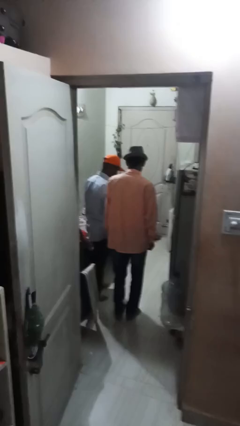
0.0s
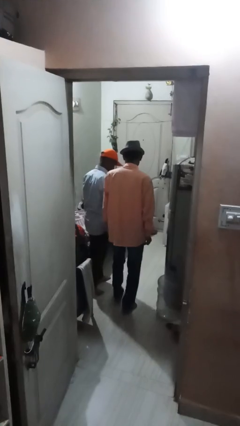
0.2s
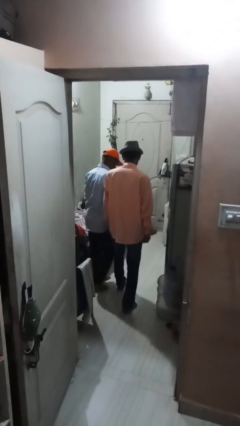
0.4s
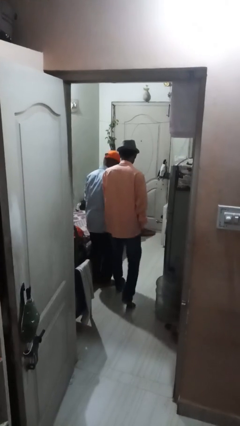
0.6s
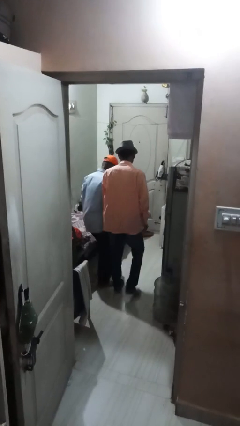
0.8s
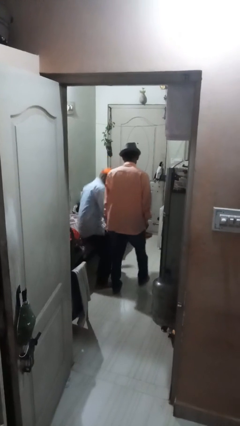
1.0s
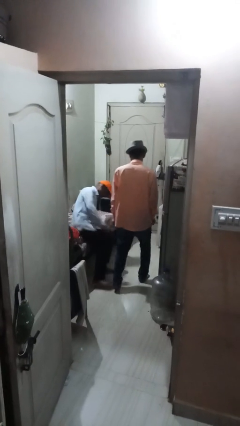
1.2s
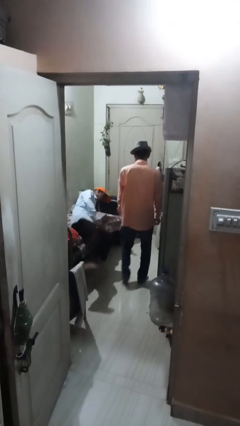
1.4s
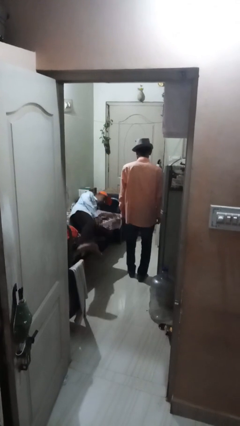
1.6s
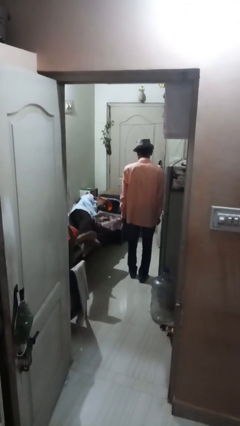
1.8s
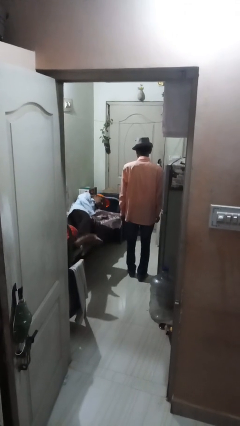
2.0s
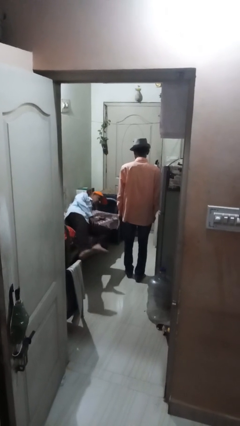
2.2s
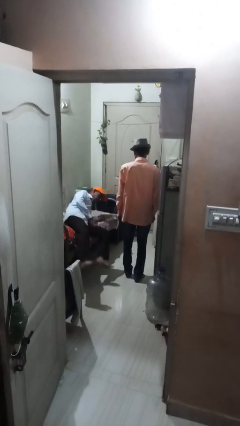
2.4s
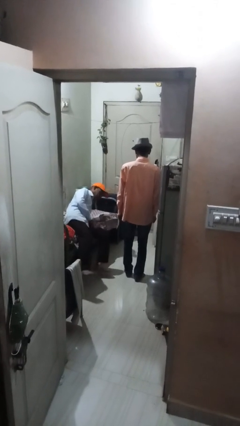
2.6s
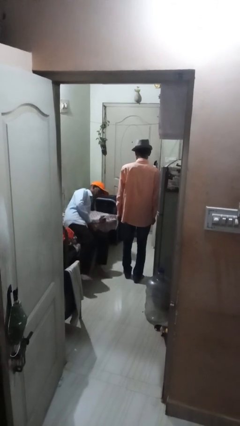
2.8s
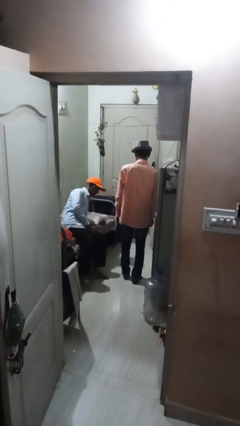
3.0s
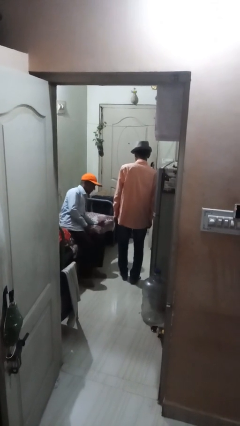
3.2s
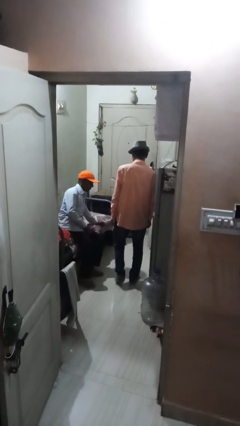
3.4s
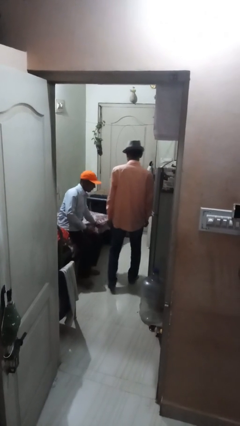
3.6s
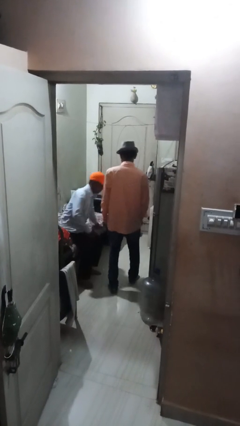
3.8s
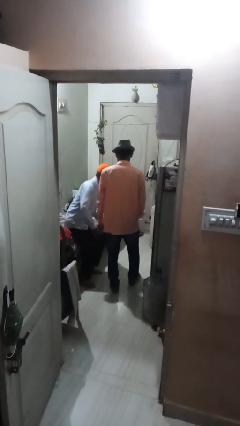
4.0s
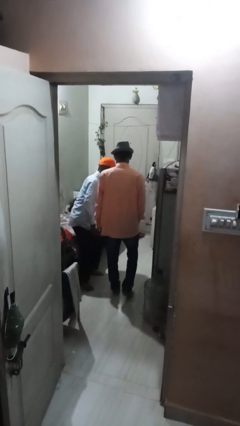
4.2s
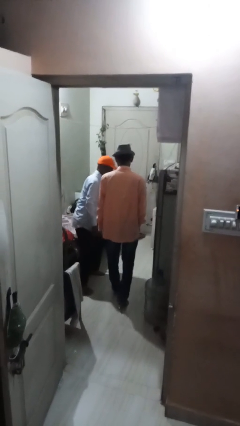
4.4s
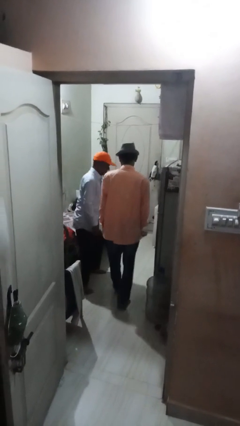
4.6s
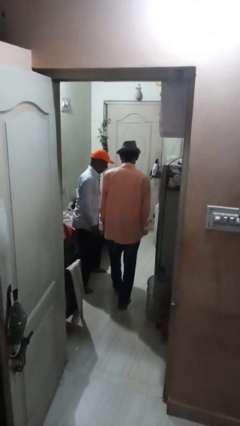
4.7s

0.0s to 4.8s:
person bumps into person

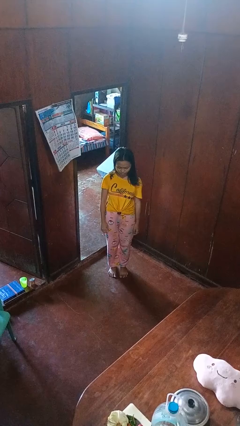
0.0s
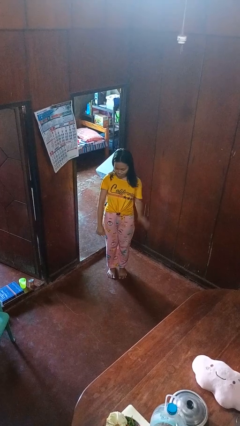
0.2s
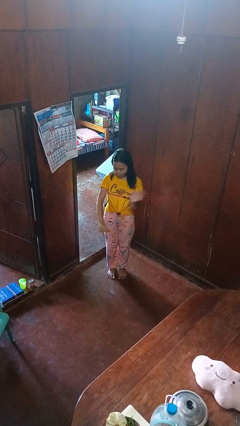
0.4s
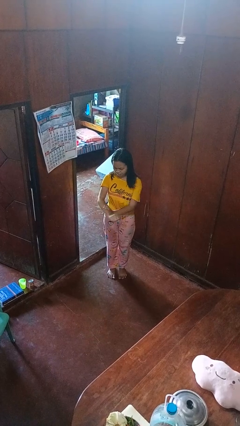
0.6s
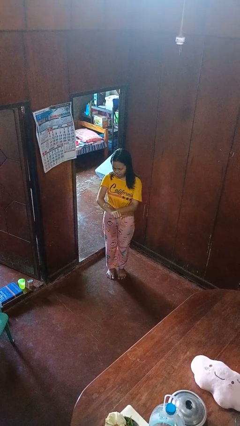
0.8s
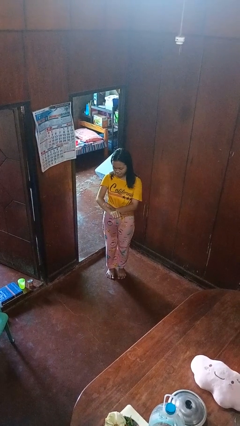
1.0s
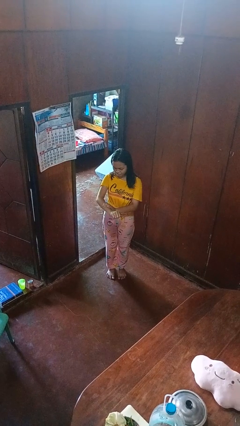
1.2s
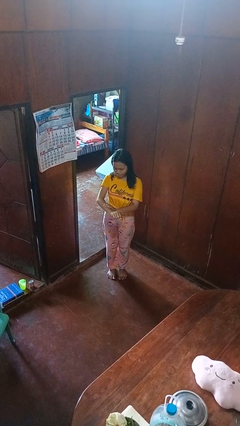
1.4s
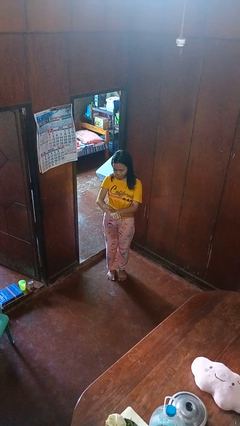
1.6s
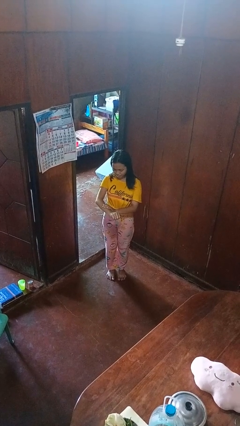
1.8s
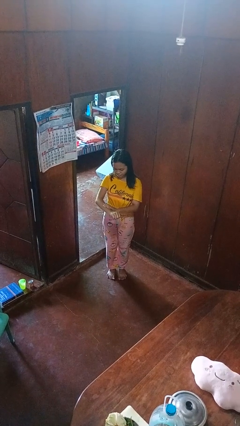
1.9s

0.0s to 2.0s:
person swats bug

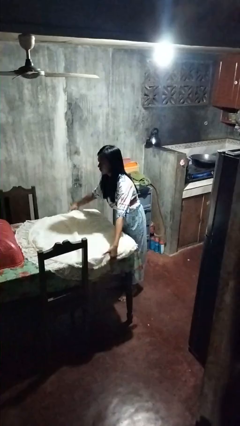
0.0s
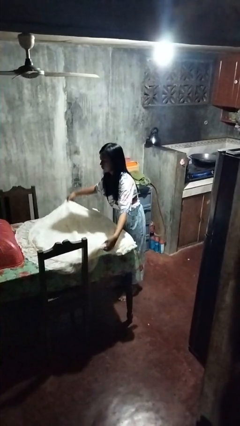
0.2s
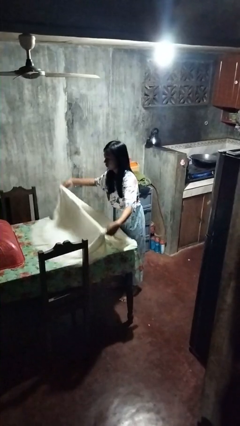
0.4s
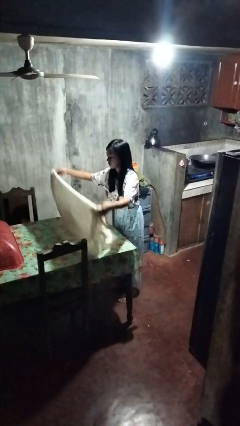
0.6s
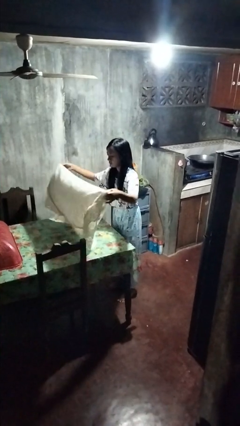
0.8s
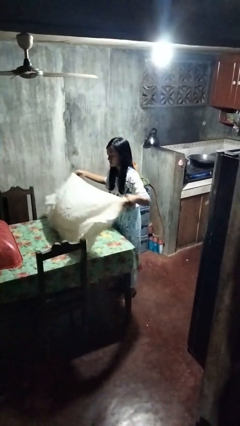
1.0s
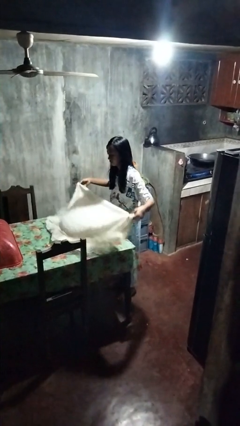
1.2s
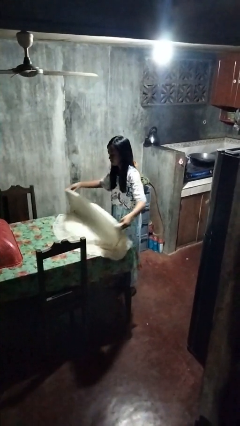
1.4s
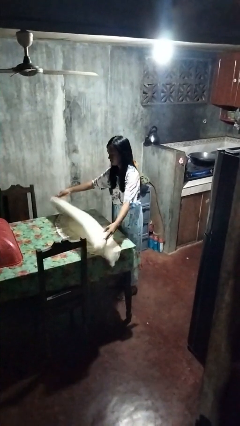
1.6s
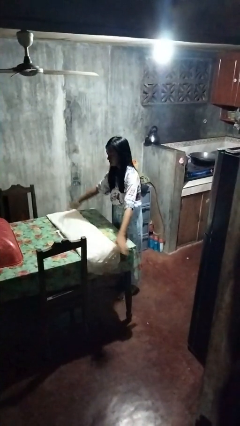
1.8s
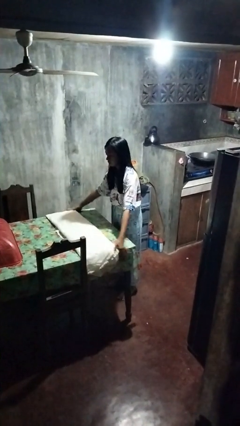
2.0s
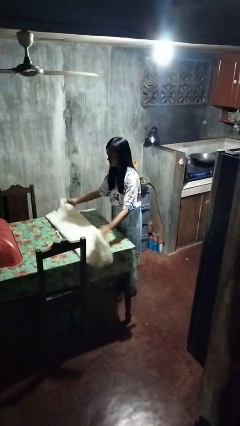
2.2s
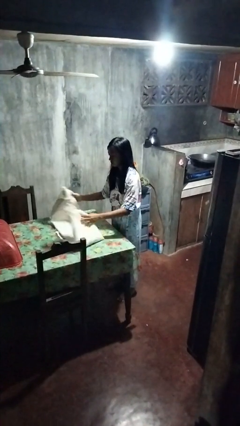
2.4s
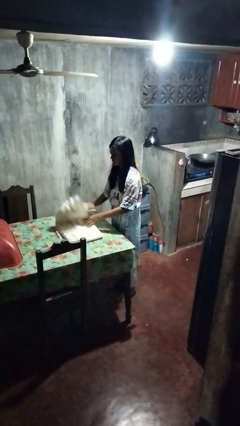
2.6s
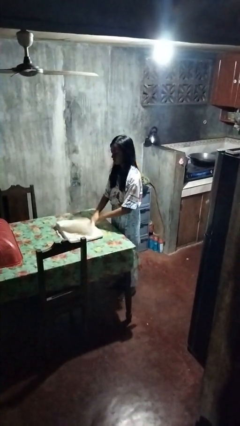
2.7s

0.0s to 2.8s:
person folds tablecloth

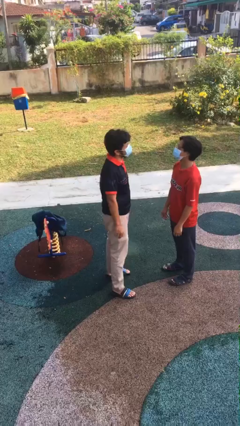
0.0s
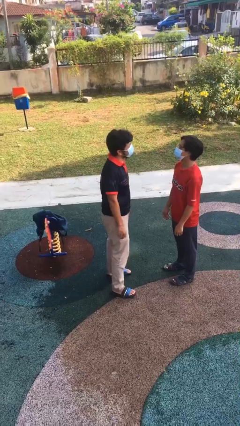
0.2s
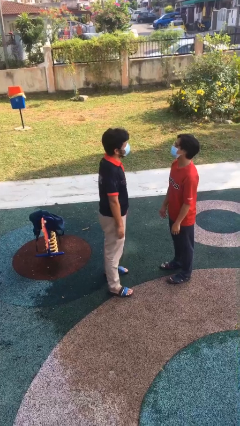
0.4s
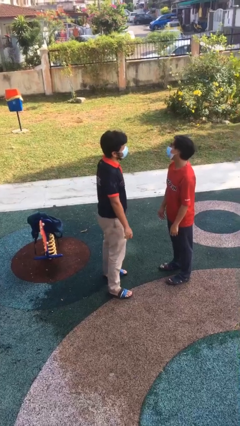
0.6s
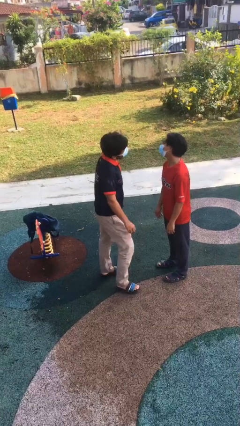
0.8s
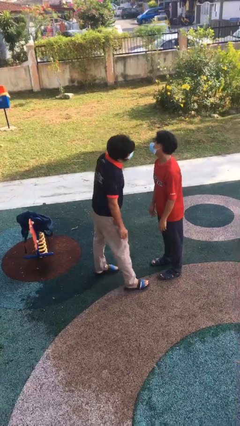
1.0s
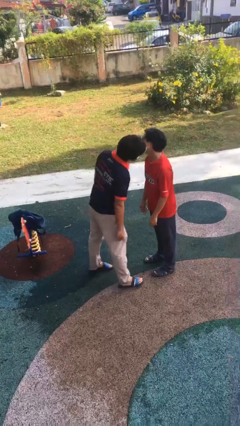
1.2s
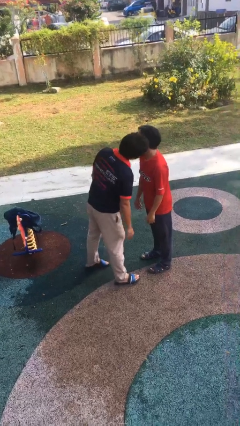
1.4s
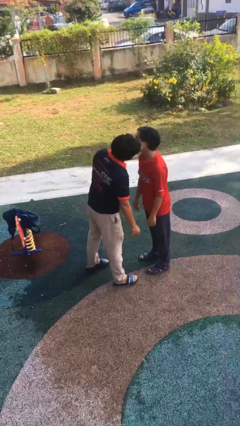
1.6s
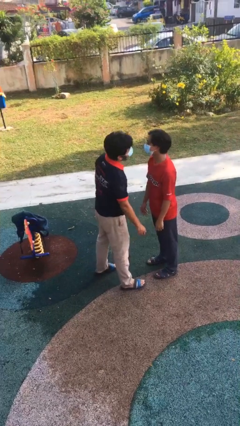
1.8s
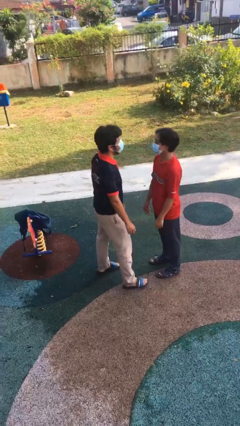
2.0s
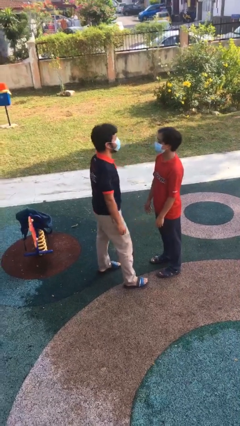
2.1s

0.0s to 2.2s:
person kisses cheek of person

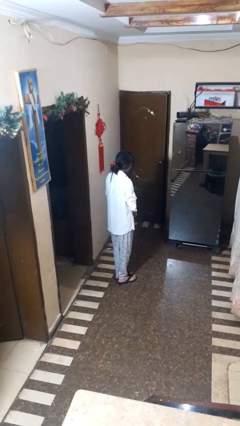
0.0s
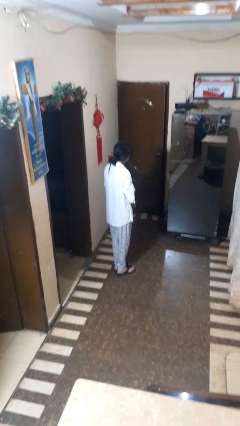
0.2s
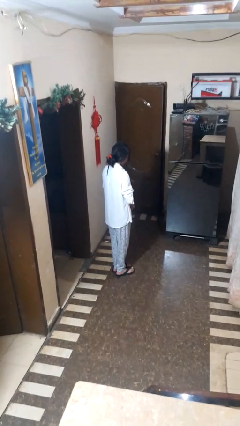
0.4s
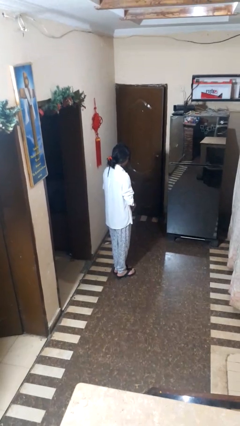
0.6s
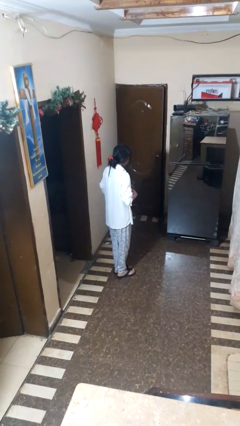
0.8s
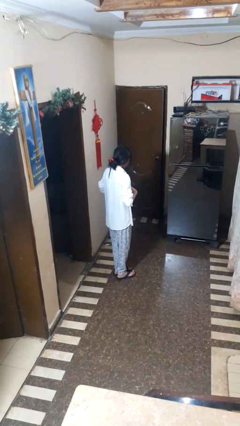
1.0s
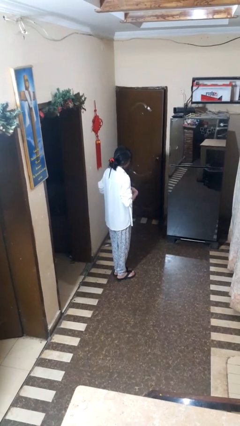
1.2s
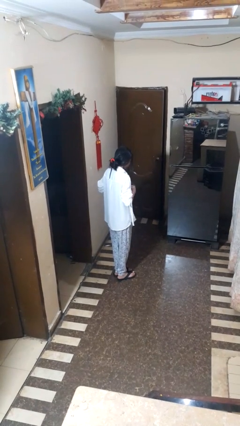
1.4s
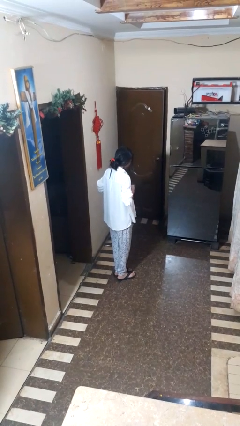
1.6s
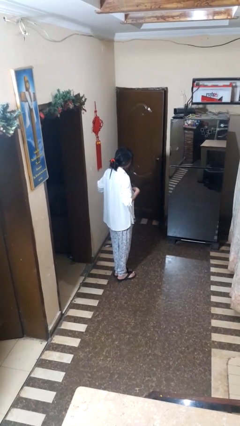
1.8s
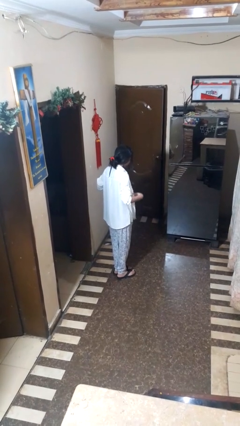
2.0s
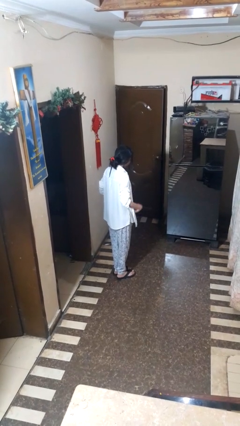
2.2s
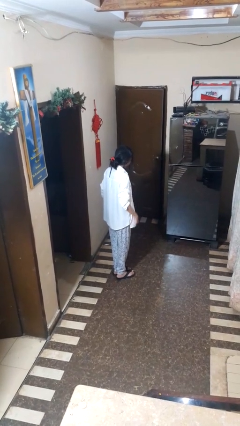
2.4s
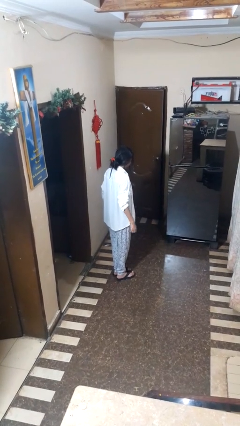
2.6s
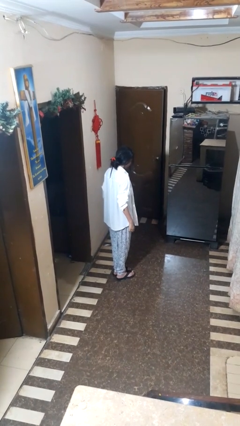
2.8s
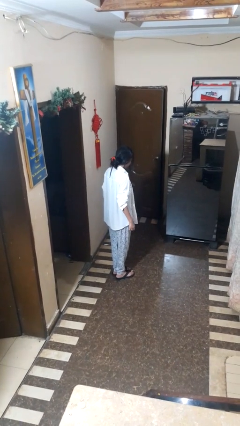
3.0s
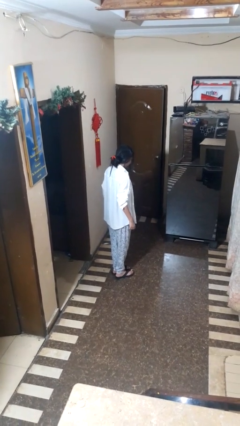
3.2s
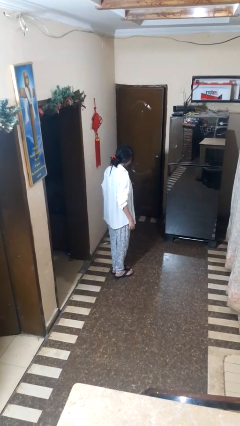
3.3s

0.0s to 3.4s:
person unbuttons shirt

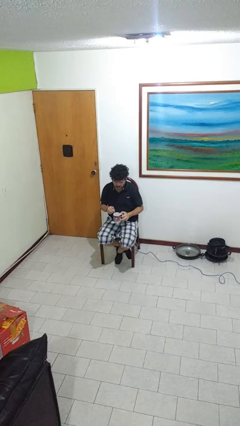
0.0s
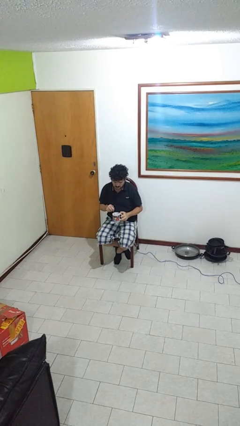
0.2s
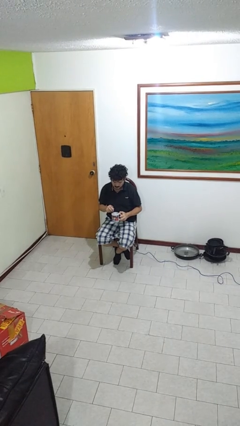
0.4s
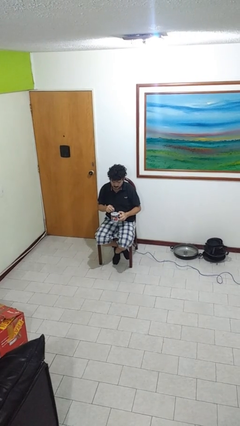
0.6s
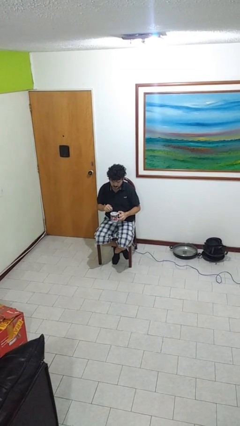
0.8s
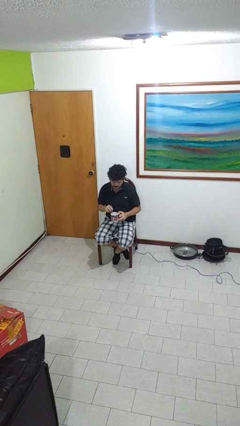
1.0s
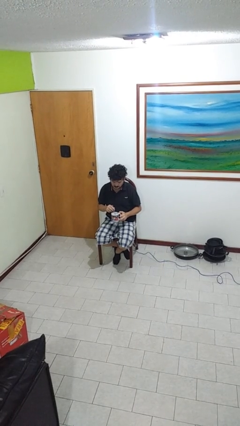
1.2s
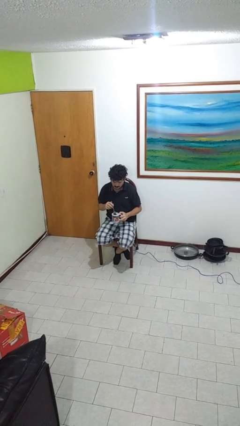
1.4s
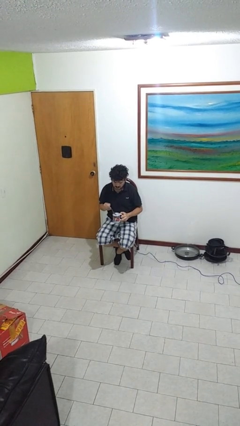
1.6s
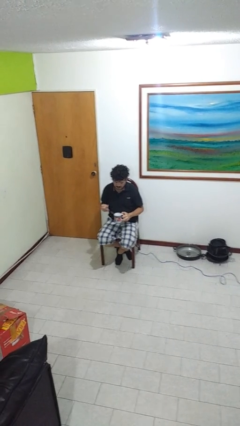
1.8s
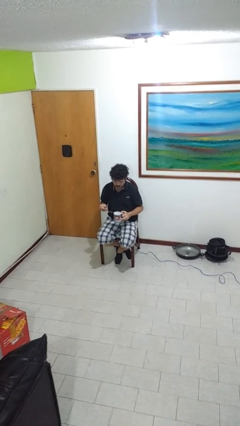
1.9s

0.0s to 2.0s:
person stirs mug

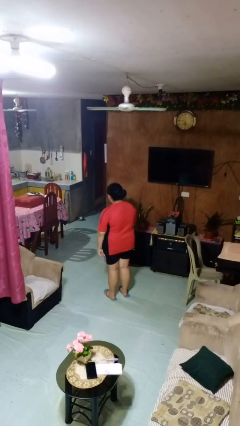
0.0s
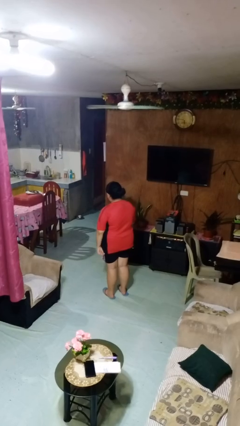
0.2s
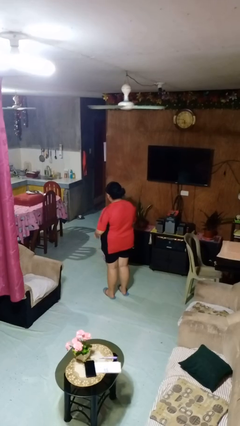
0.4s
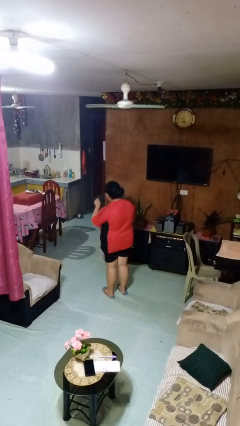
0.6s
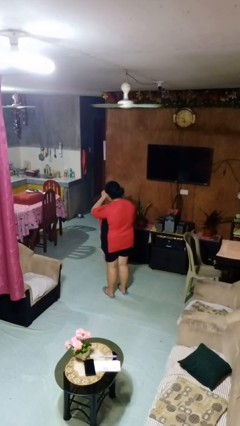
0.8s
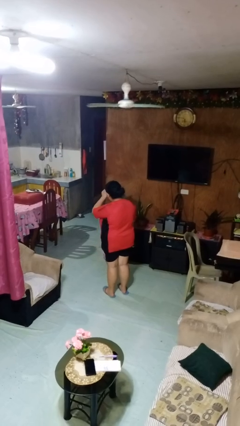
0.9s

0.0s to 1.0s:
person rubs eyes
